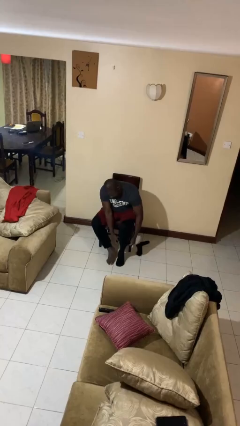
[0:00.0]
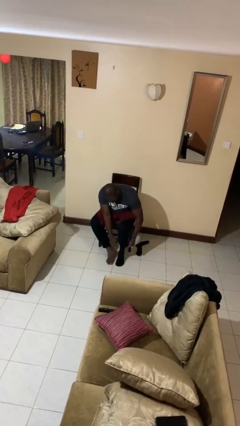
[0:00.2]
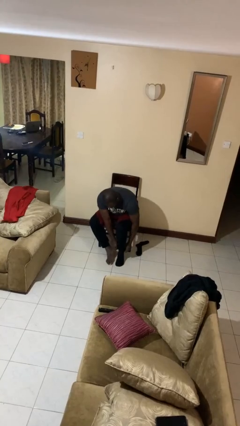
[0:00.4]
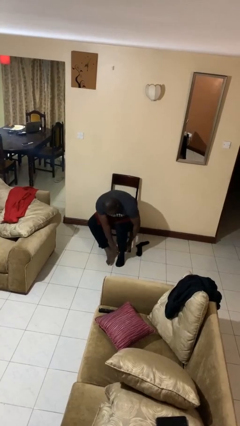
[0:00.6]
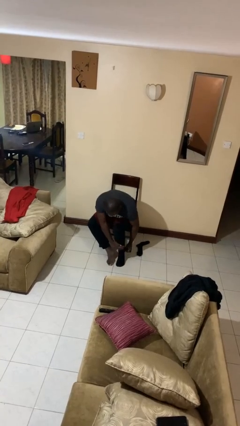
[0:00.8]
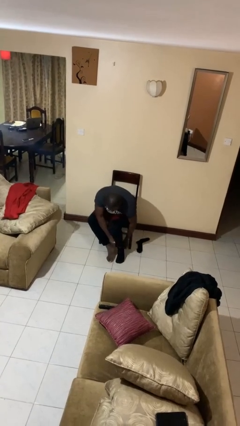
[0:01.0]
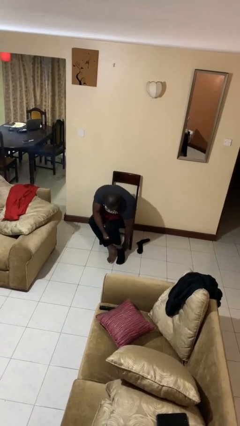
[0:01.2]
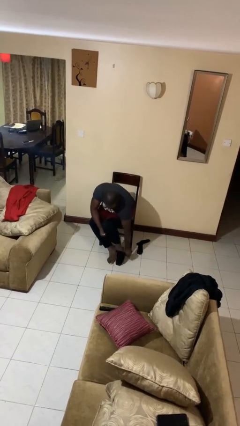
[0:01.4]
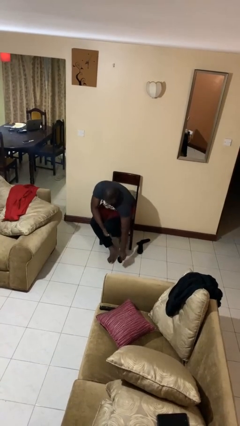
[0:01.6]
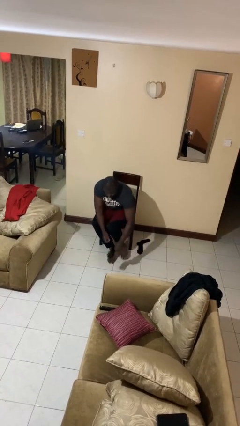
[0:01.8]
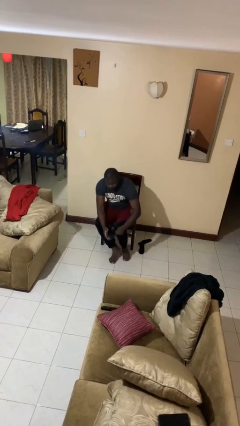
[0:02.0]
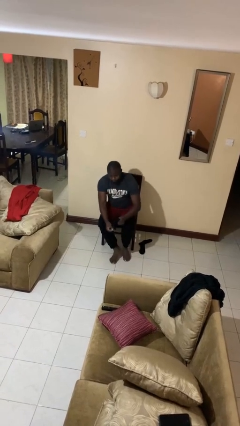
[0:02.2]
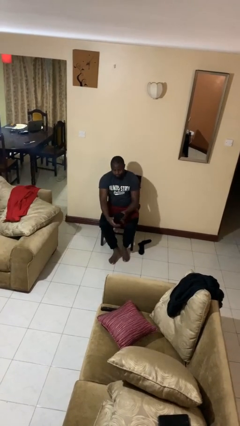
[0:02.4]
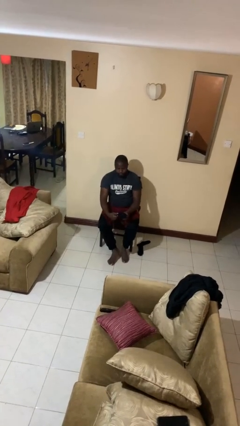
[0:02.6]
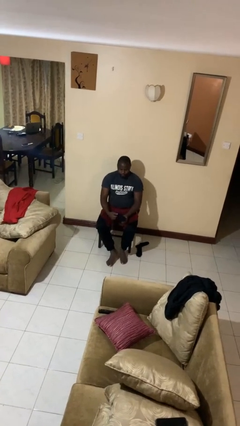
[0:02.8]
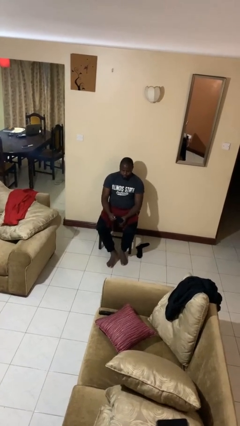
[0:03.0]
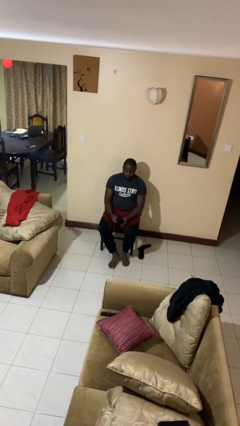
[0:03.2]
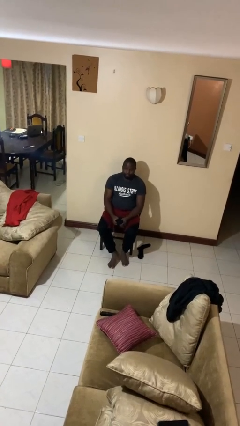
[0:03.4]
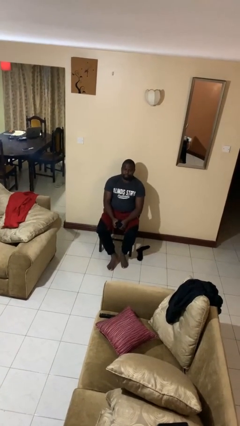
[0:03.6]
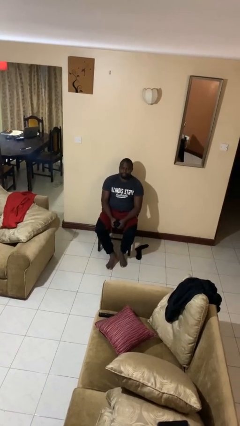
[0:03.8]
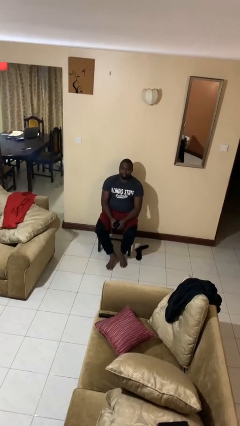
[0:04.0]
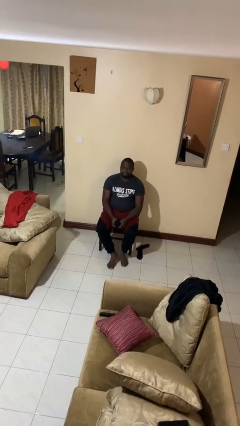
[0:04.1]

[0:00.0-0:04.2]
person takes off socks

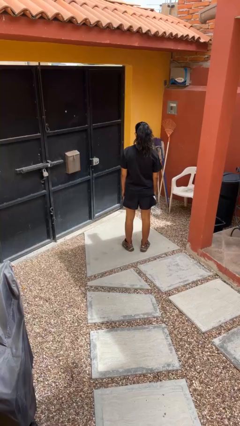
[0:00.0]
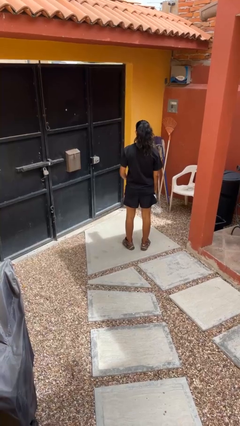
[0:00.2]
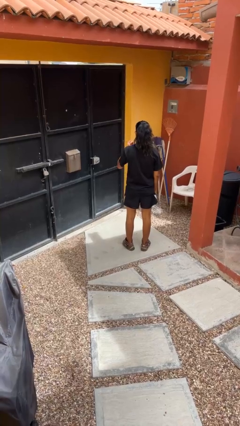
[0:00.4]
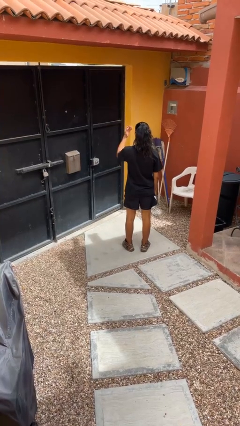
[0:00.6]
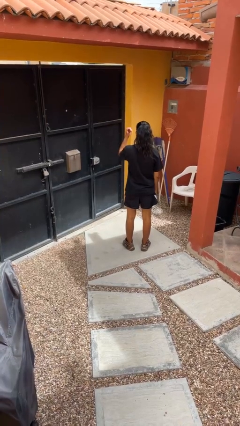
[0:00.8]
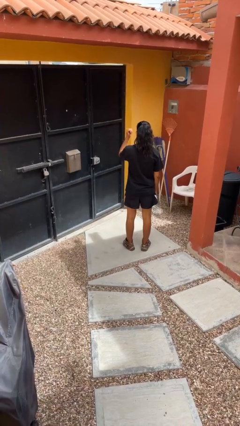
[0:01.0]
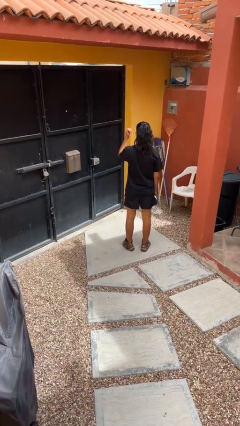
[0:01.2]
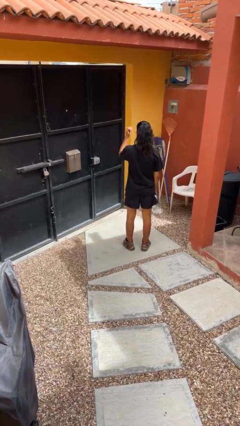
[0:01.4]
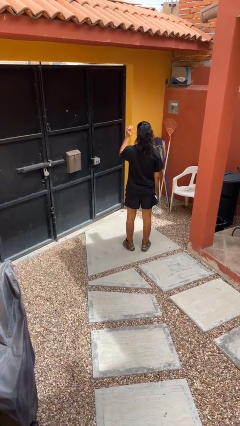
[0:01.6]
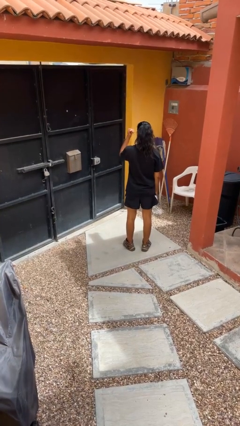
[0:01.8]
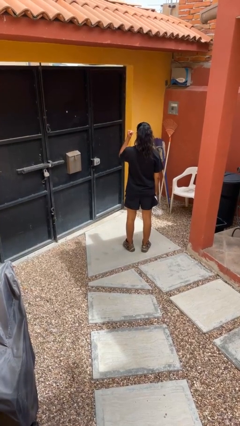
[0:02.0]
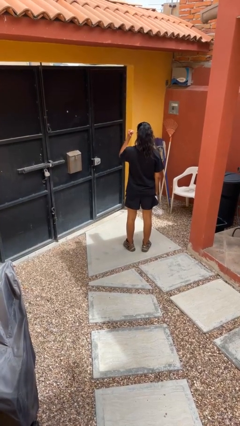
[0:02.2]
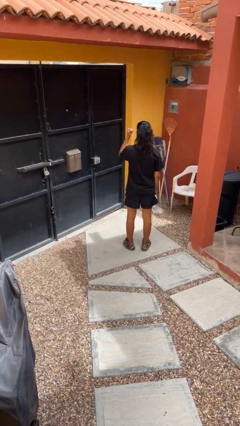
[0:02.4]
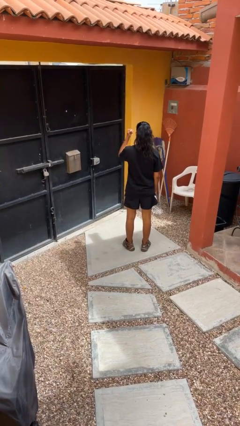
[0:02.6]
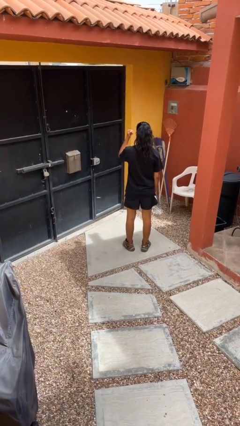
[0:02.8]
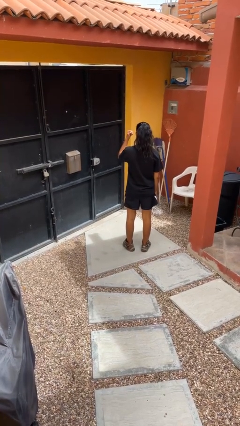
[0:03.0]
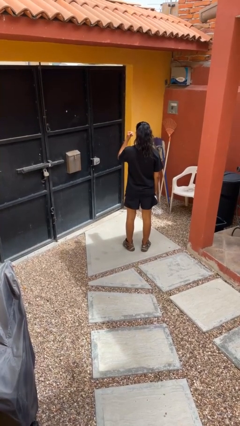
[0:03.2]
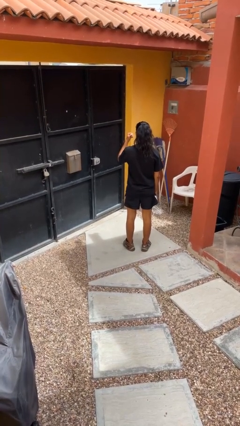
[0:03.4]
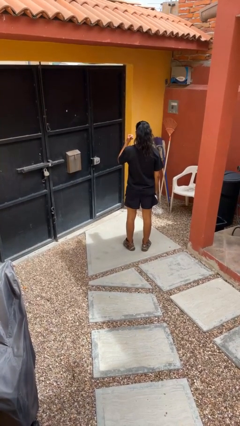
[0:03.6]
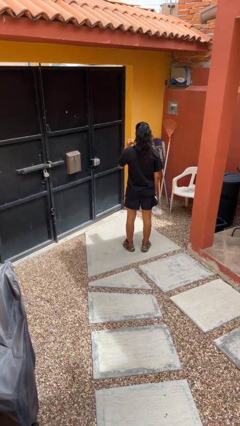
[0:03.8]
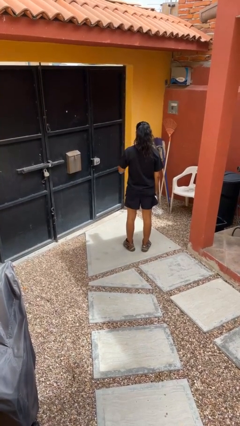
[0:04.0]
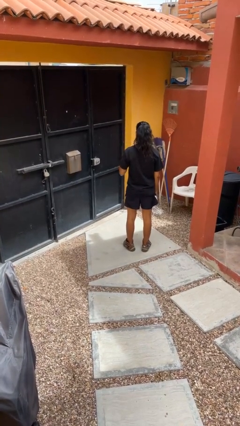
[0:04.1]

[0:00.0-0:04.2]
person gestures come here

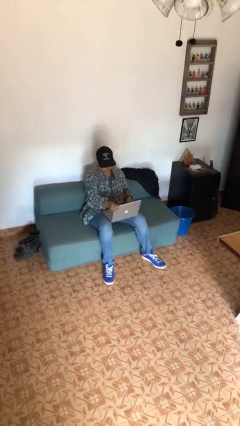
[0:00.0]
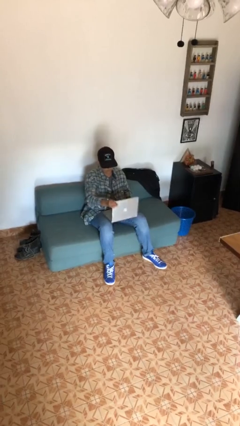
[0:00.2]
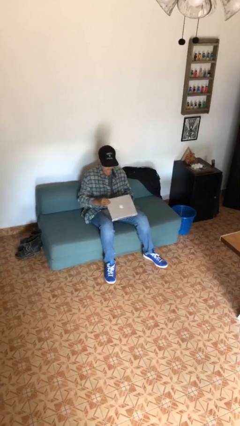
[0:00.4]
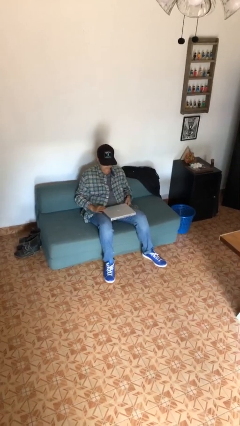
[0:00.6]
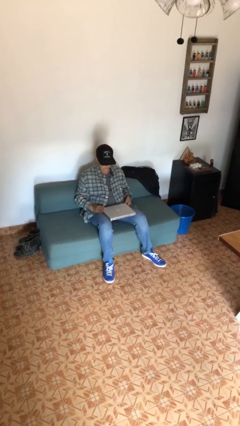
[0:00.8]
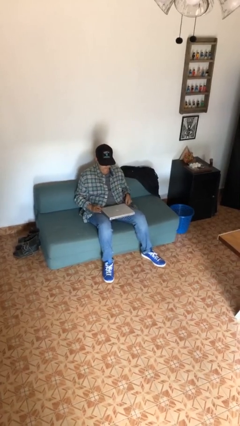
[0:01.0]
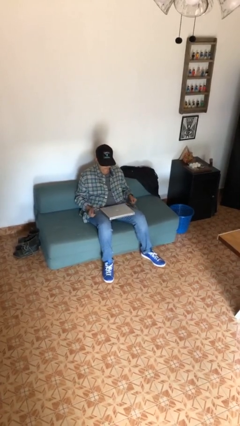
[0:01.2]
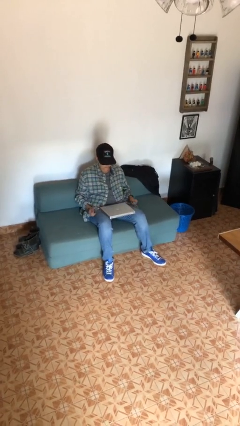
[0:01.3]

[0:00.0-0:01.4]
person closes laptop

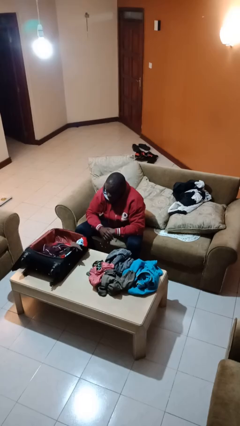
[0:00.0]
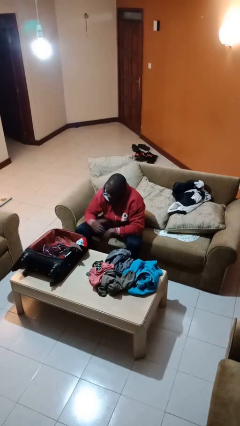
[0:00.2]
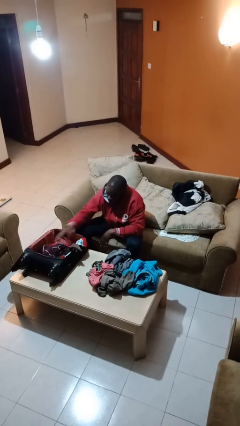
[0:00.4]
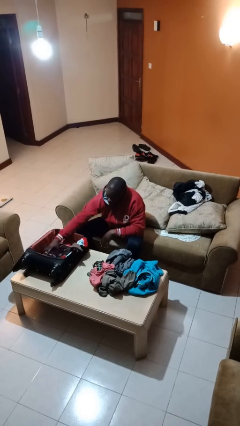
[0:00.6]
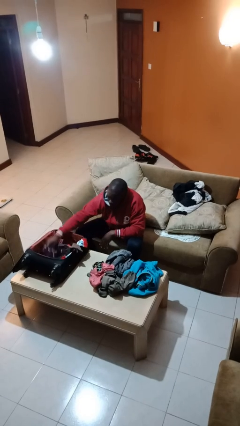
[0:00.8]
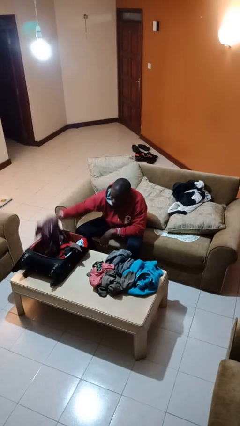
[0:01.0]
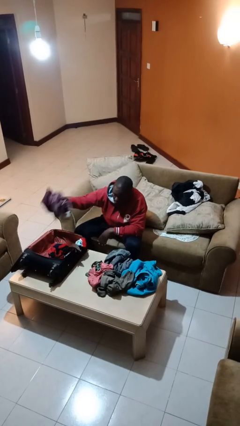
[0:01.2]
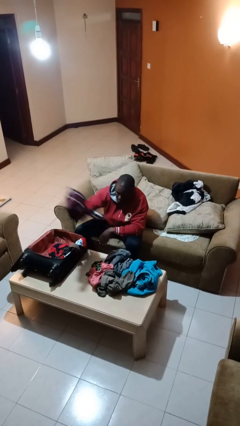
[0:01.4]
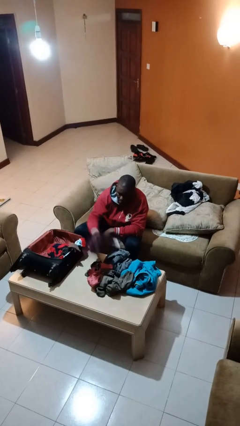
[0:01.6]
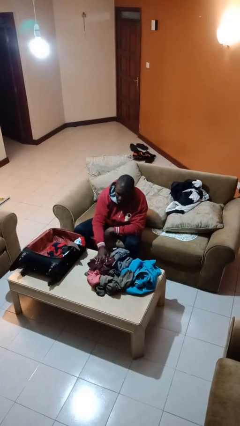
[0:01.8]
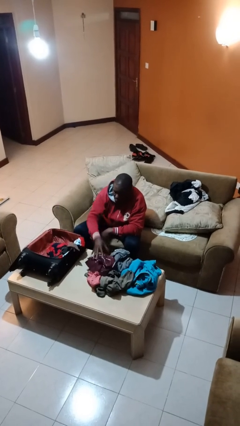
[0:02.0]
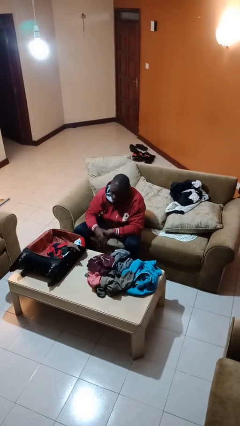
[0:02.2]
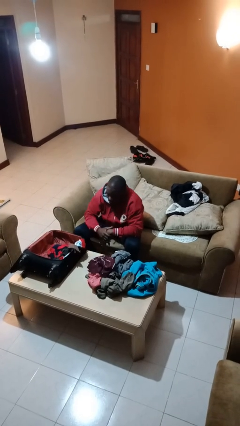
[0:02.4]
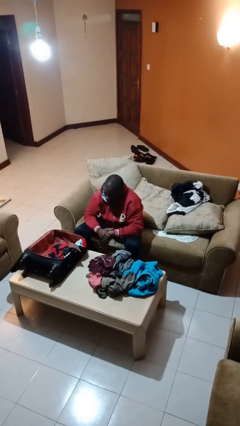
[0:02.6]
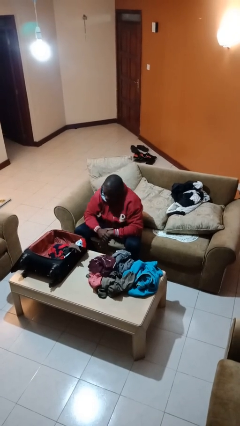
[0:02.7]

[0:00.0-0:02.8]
person unloads clothes from suitcase

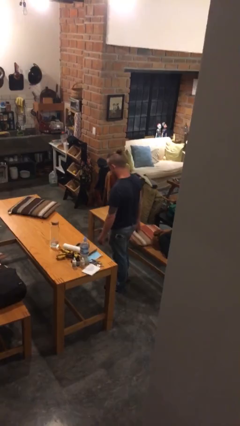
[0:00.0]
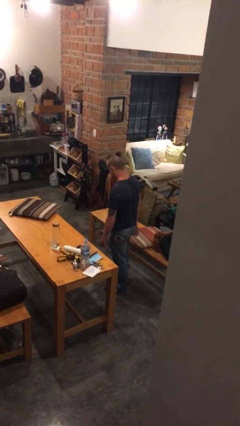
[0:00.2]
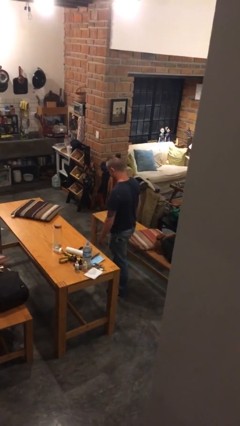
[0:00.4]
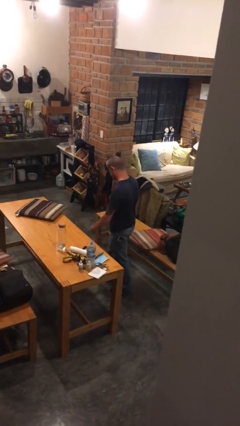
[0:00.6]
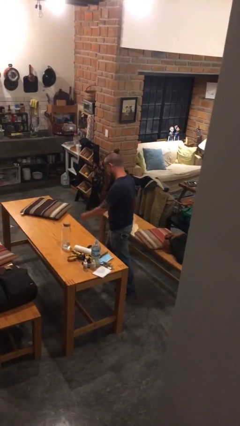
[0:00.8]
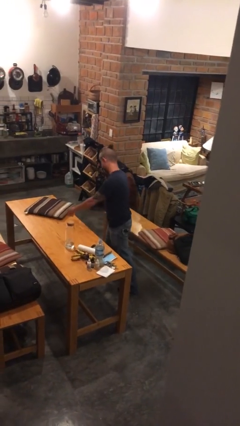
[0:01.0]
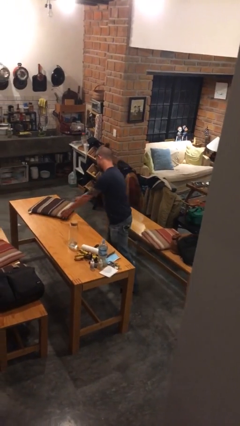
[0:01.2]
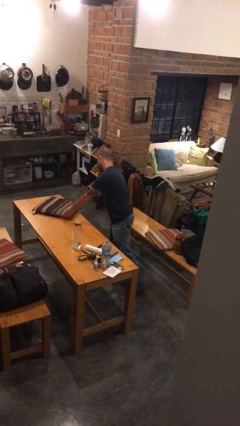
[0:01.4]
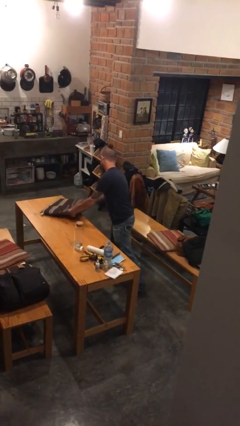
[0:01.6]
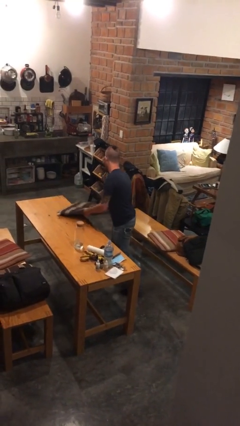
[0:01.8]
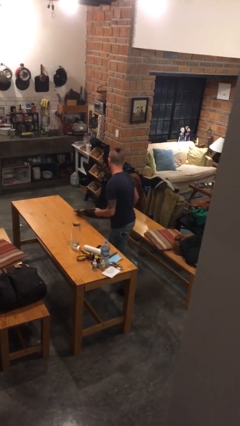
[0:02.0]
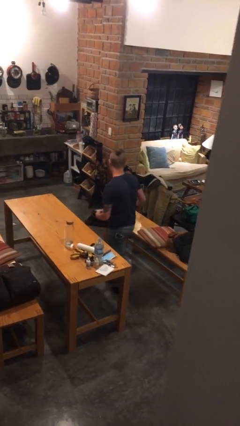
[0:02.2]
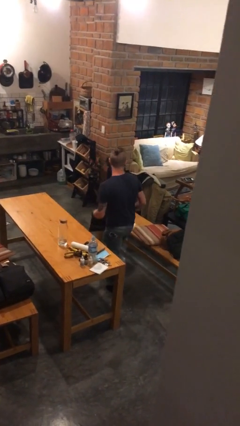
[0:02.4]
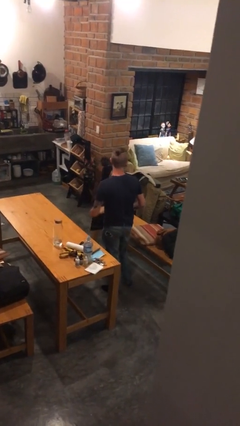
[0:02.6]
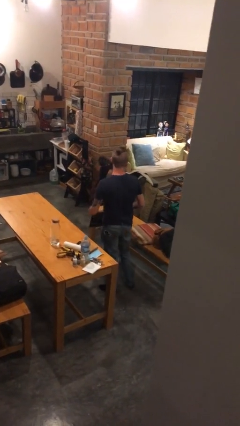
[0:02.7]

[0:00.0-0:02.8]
person picks up object from table

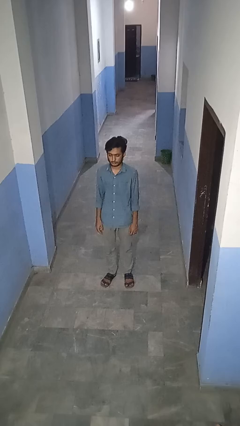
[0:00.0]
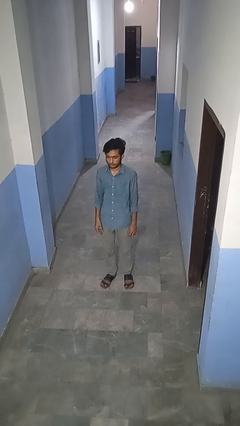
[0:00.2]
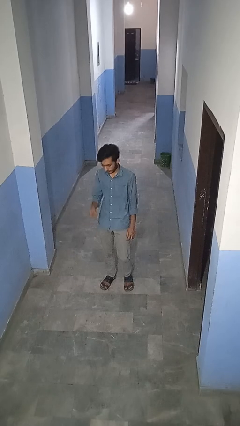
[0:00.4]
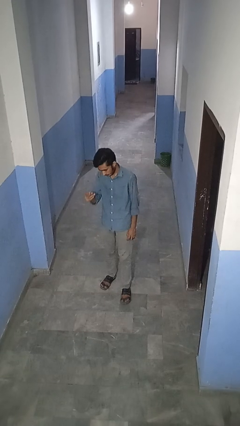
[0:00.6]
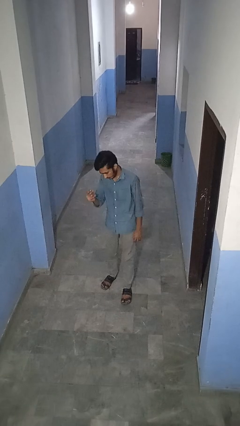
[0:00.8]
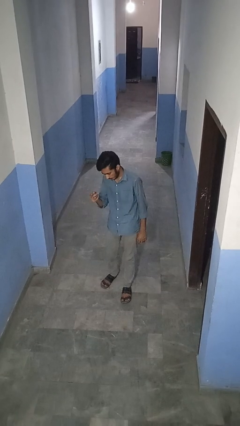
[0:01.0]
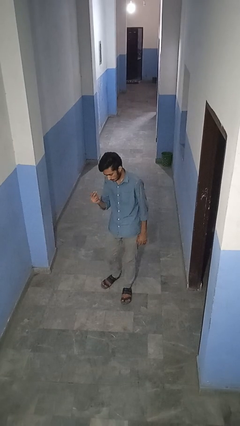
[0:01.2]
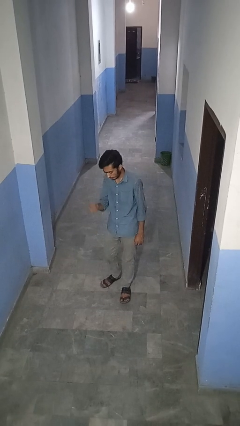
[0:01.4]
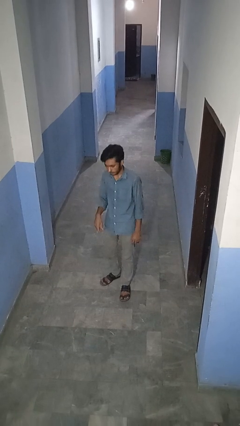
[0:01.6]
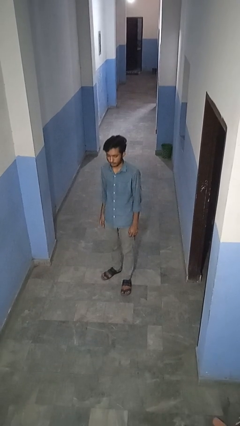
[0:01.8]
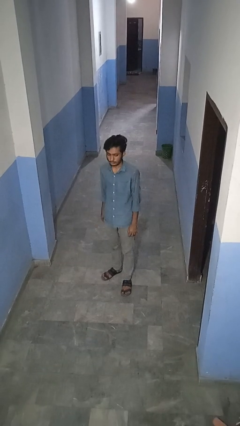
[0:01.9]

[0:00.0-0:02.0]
person snaps fingers
